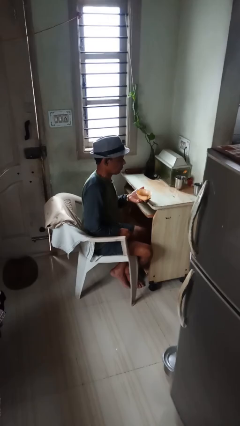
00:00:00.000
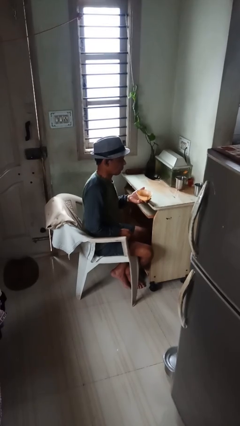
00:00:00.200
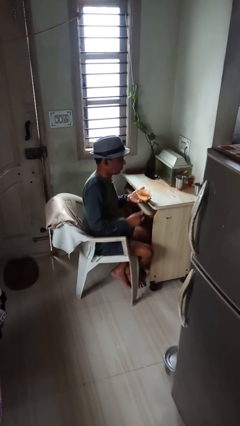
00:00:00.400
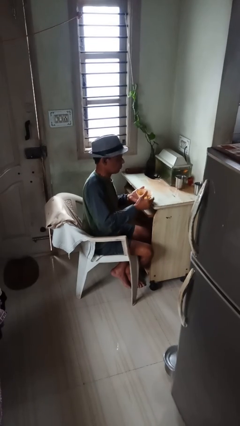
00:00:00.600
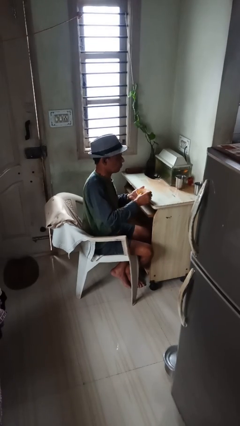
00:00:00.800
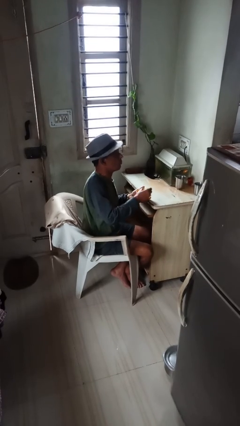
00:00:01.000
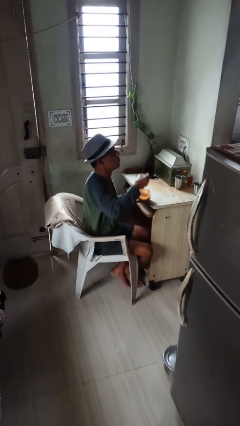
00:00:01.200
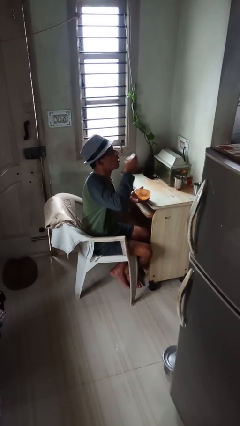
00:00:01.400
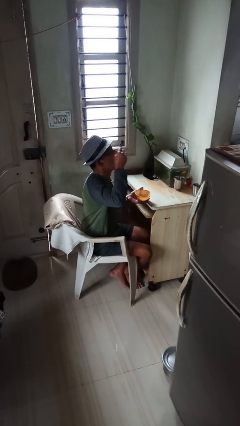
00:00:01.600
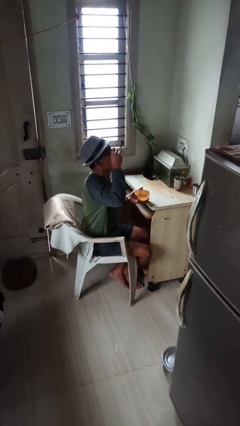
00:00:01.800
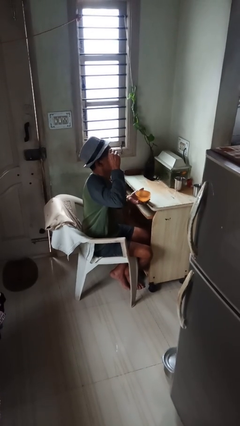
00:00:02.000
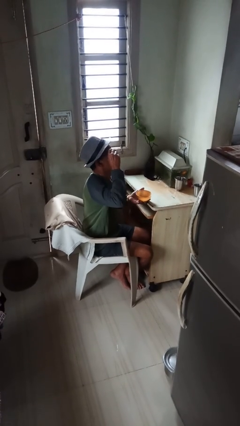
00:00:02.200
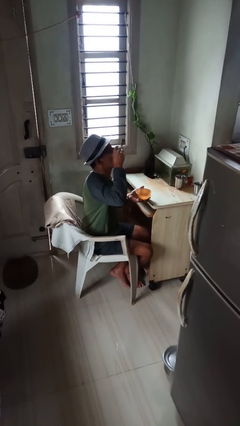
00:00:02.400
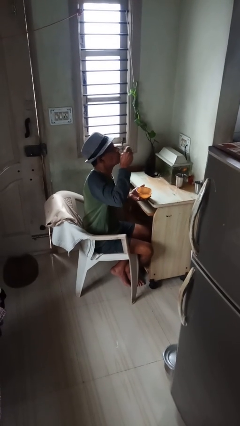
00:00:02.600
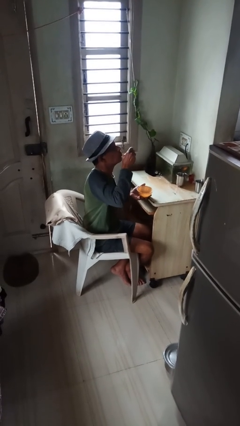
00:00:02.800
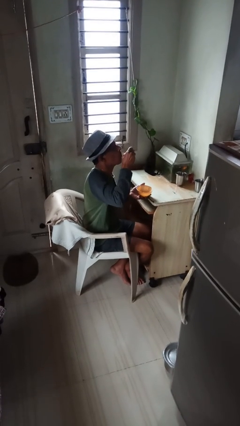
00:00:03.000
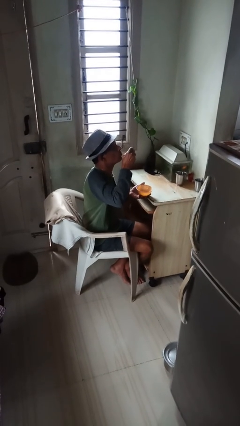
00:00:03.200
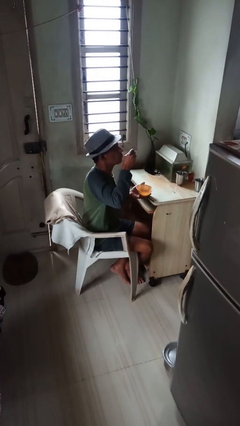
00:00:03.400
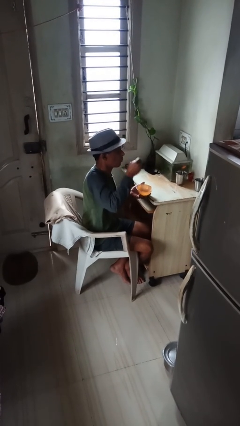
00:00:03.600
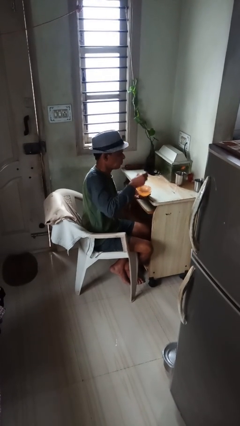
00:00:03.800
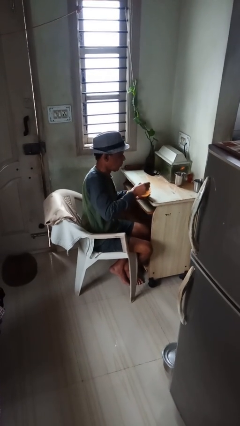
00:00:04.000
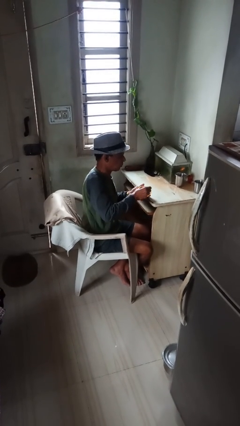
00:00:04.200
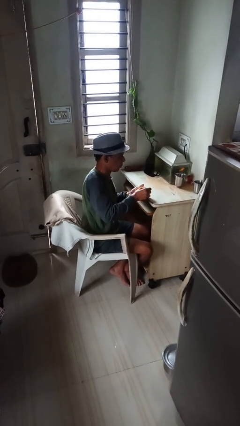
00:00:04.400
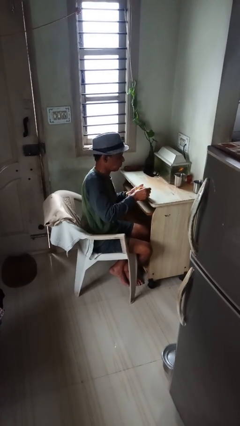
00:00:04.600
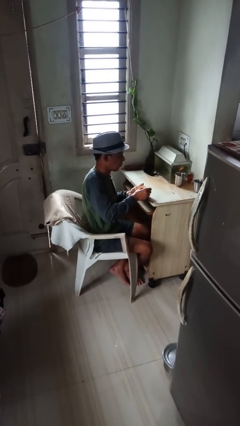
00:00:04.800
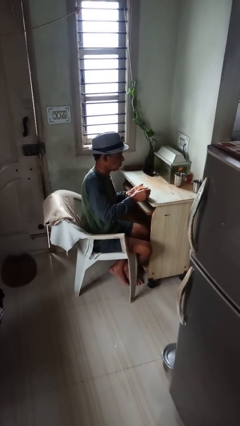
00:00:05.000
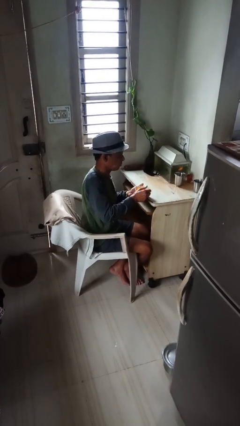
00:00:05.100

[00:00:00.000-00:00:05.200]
person eats with utensil

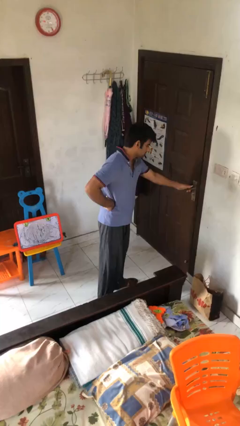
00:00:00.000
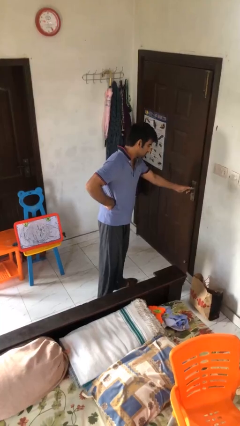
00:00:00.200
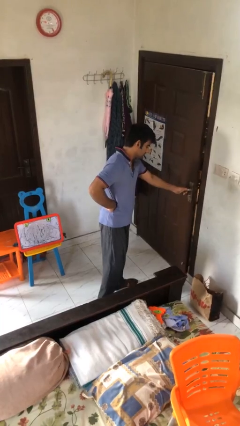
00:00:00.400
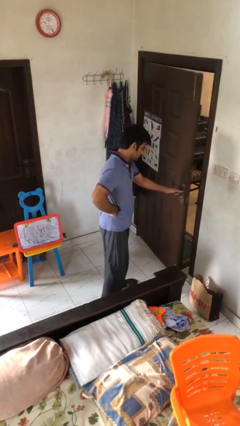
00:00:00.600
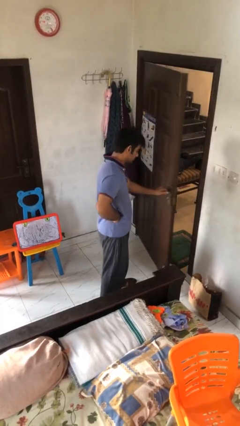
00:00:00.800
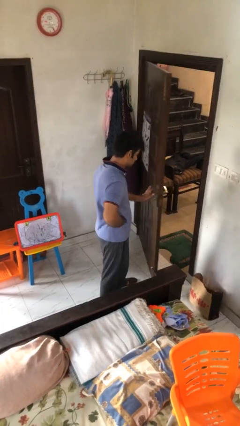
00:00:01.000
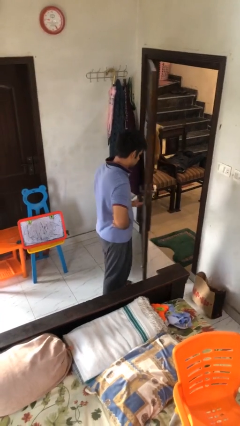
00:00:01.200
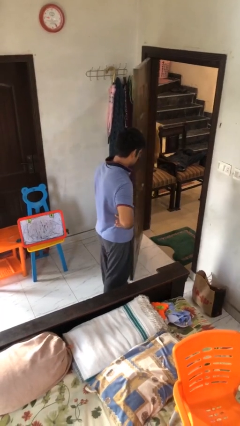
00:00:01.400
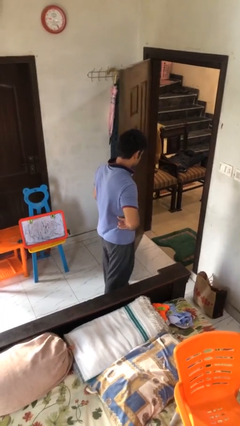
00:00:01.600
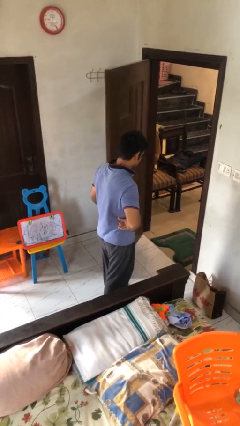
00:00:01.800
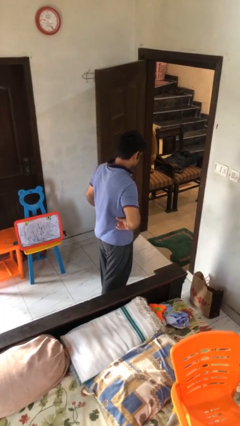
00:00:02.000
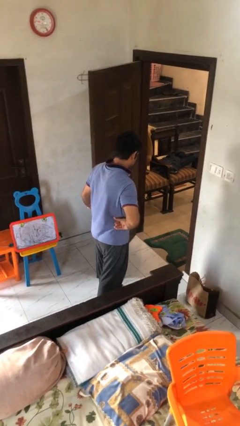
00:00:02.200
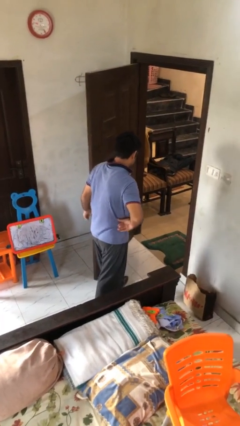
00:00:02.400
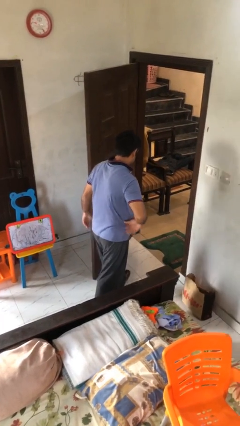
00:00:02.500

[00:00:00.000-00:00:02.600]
person opens facility door

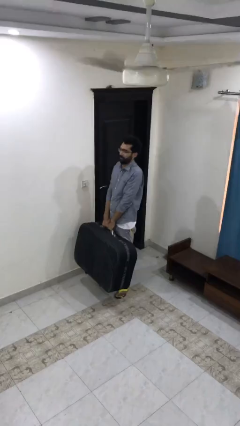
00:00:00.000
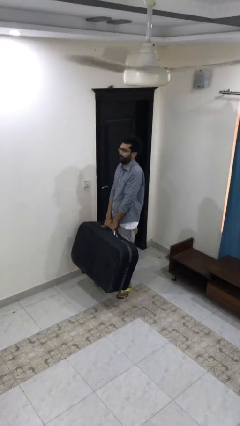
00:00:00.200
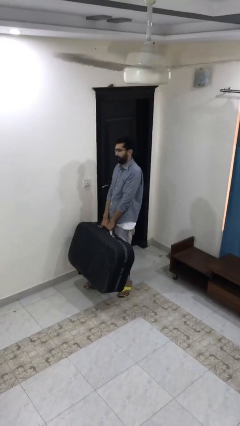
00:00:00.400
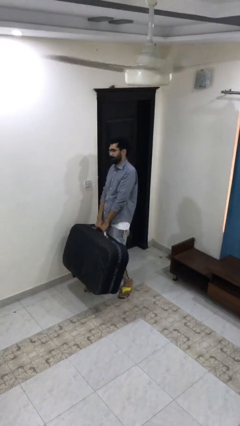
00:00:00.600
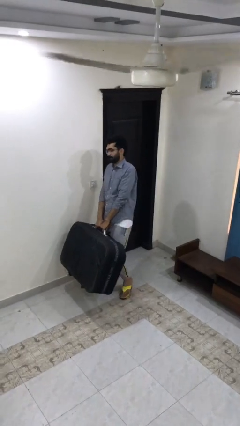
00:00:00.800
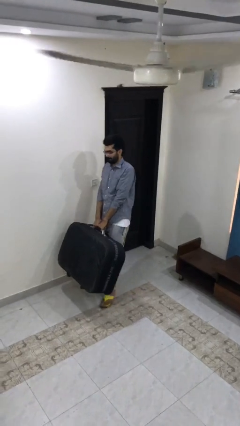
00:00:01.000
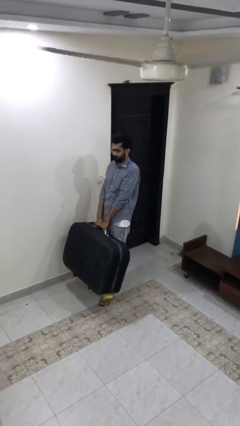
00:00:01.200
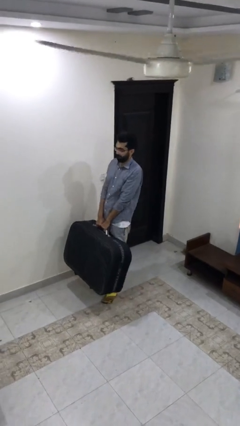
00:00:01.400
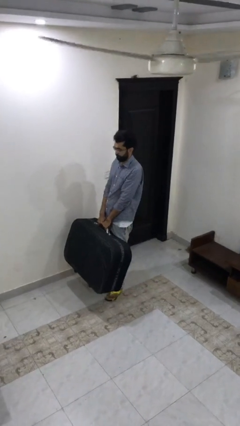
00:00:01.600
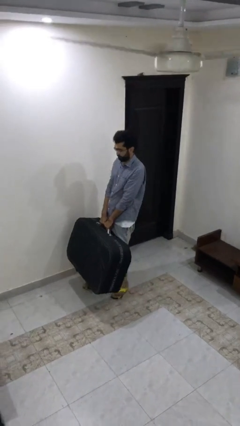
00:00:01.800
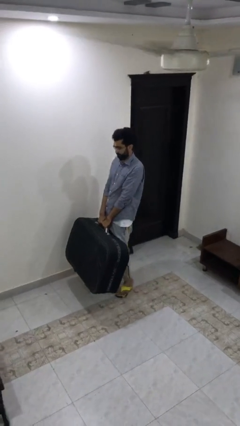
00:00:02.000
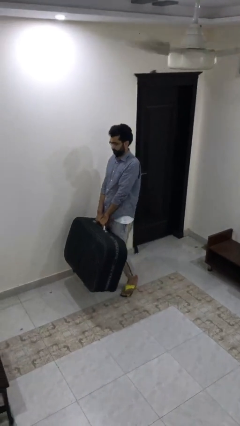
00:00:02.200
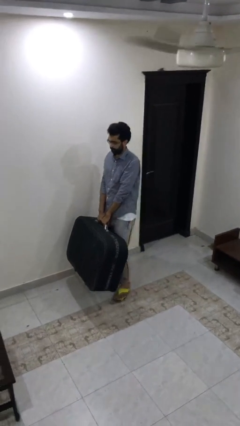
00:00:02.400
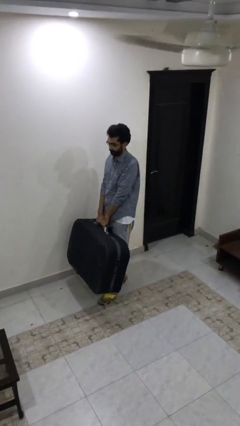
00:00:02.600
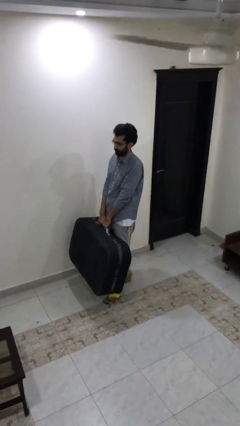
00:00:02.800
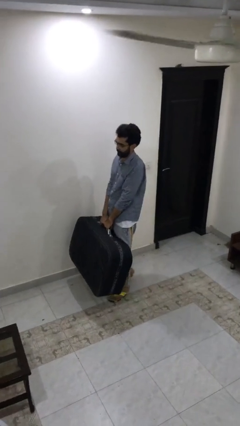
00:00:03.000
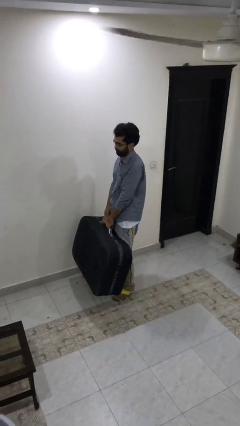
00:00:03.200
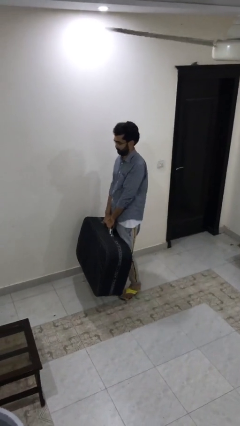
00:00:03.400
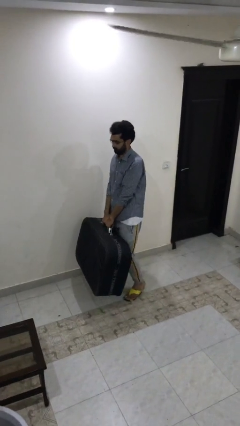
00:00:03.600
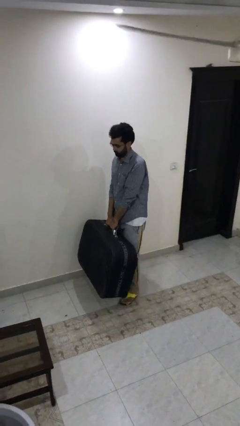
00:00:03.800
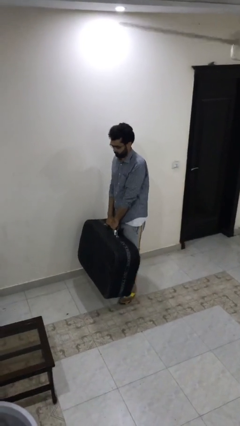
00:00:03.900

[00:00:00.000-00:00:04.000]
person carries heavy object

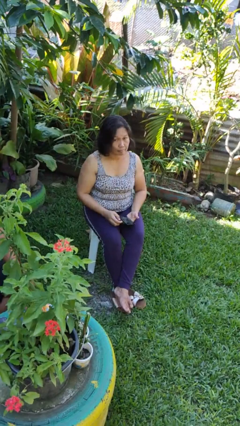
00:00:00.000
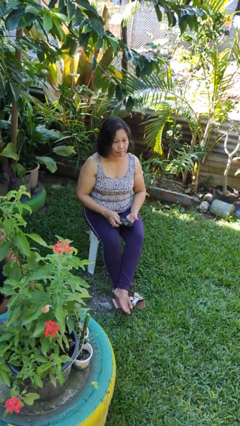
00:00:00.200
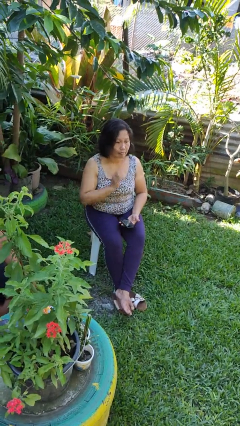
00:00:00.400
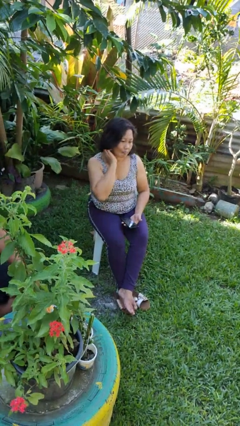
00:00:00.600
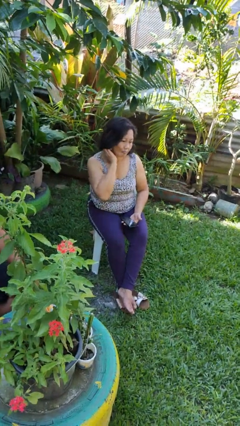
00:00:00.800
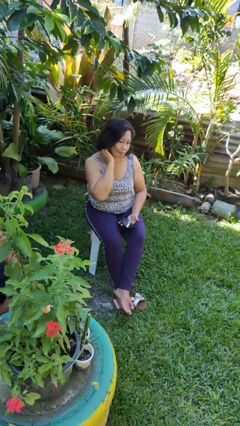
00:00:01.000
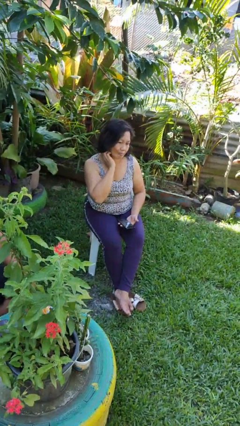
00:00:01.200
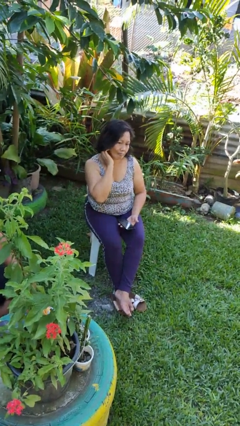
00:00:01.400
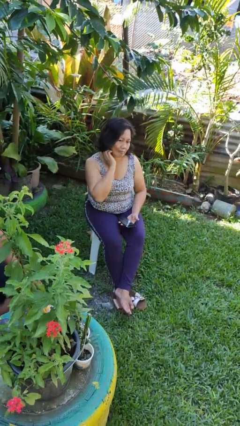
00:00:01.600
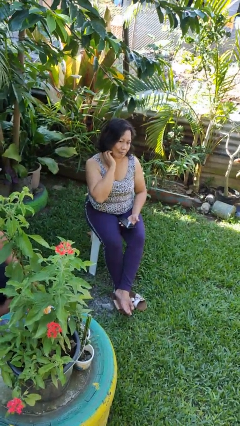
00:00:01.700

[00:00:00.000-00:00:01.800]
person scratches face

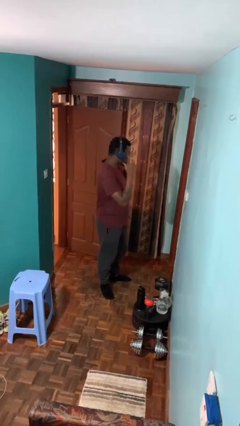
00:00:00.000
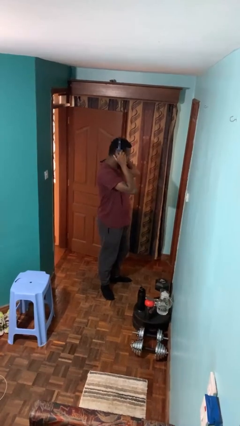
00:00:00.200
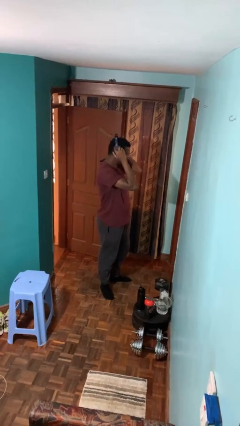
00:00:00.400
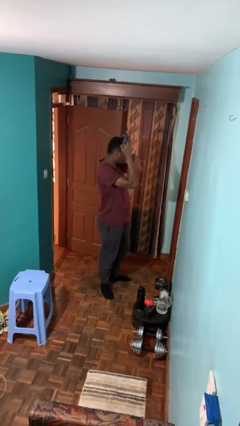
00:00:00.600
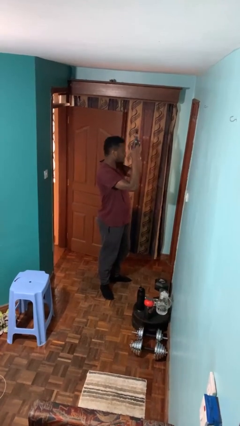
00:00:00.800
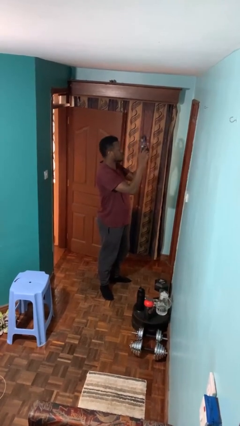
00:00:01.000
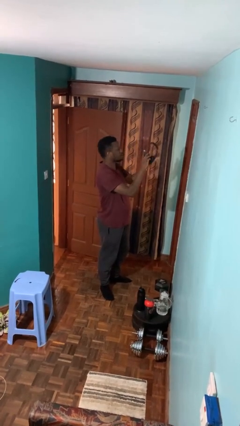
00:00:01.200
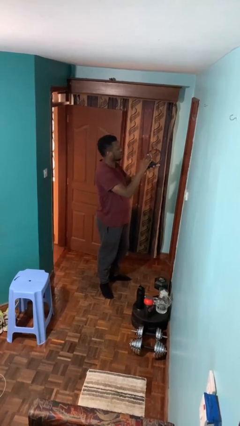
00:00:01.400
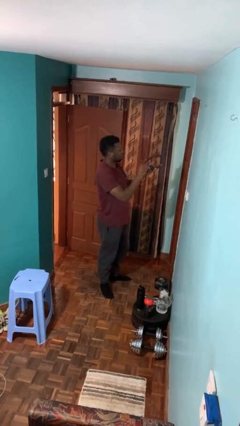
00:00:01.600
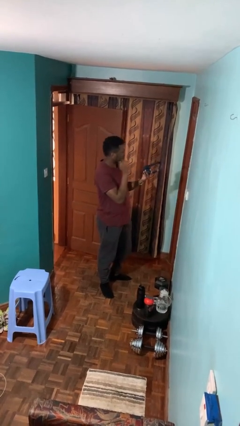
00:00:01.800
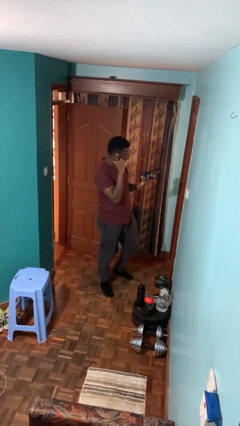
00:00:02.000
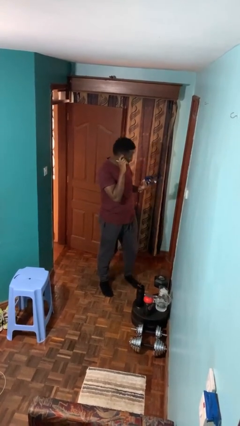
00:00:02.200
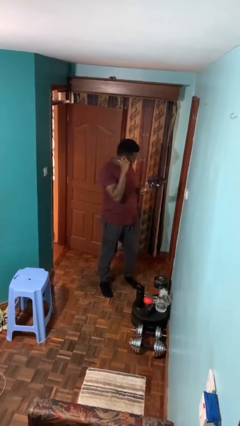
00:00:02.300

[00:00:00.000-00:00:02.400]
person takes off headphones

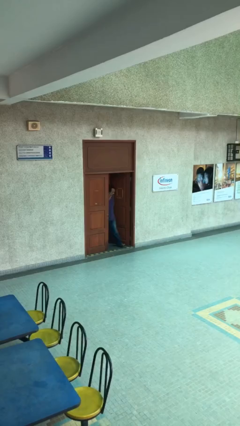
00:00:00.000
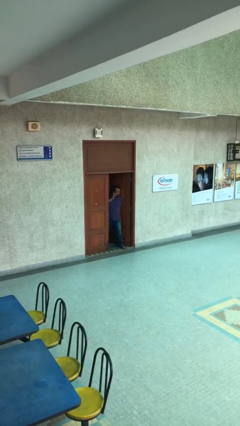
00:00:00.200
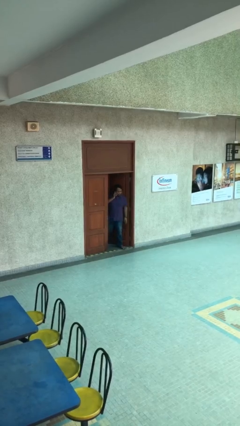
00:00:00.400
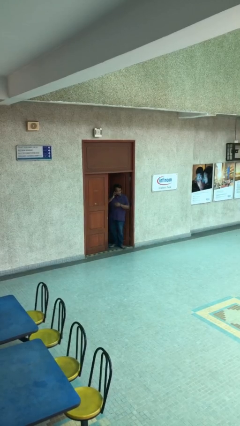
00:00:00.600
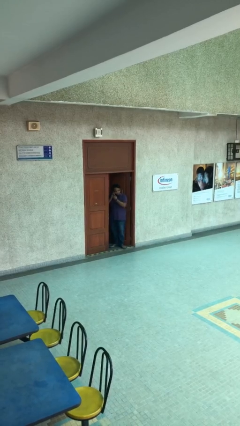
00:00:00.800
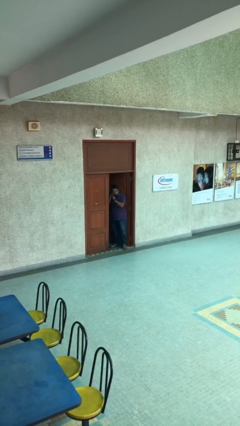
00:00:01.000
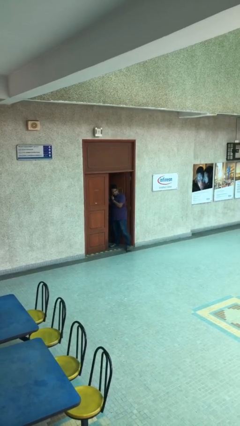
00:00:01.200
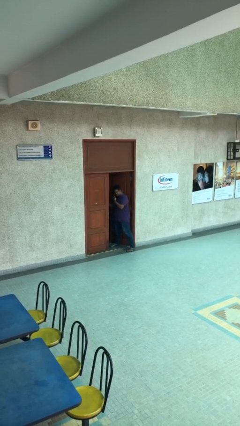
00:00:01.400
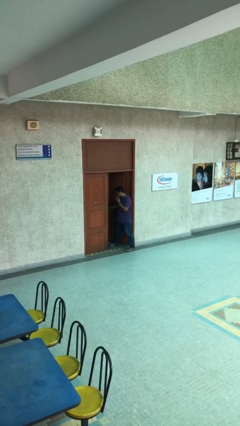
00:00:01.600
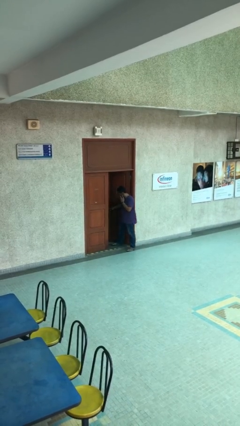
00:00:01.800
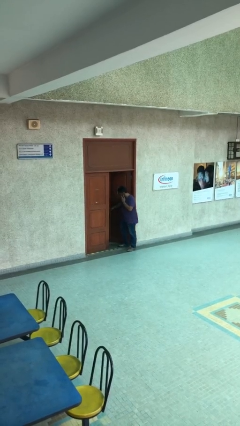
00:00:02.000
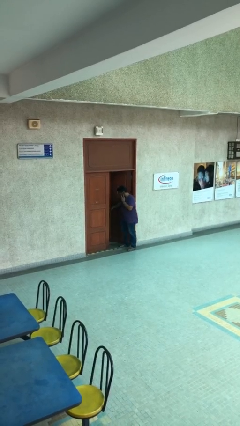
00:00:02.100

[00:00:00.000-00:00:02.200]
person enters scene through structure
